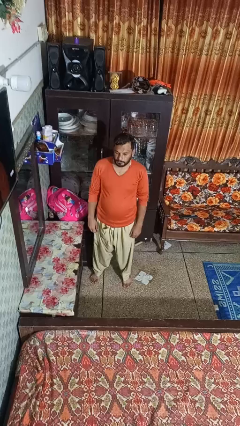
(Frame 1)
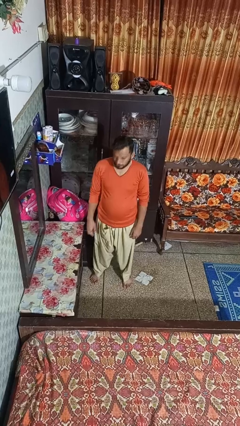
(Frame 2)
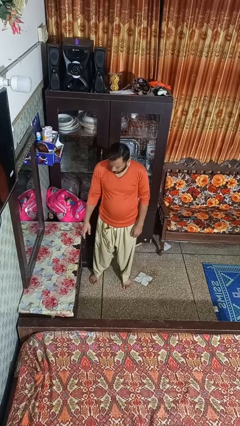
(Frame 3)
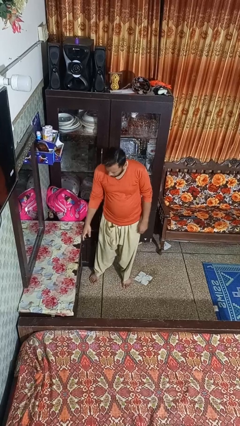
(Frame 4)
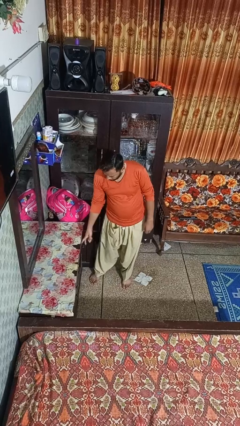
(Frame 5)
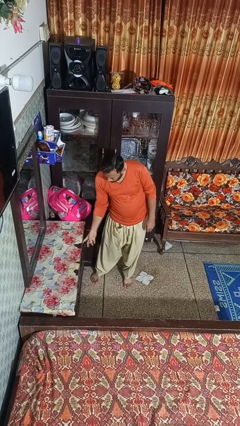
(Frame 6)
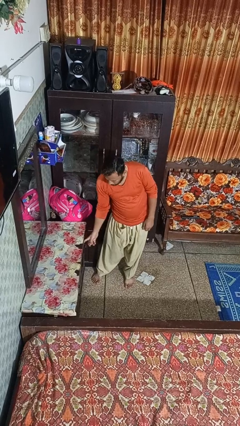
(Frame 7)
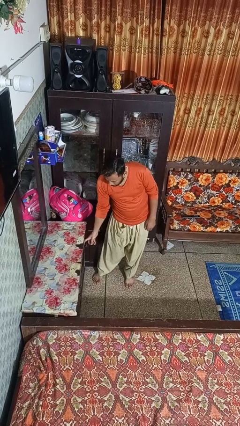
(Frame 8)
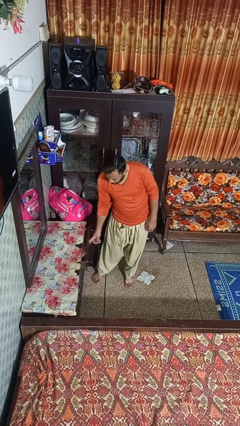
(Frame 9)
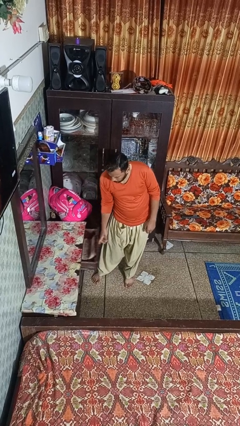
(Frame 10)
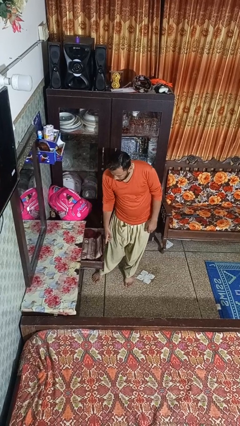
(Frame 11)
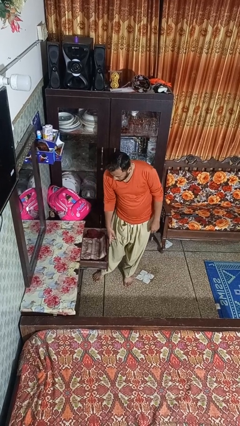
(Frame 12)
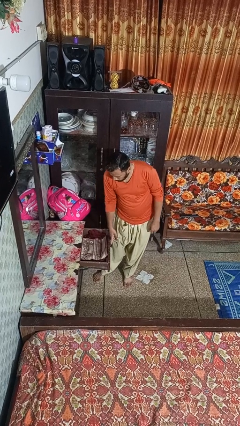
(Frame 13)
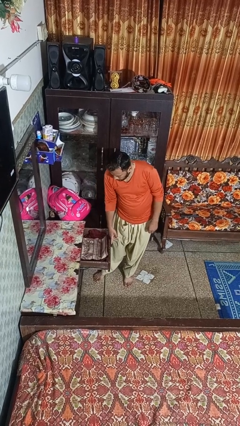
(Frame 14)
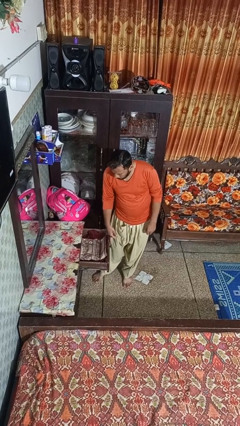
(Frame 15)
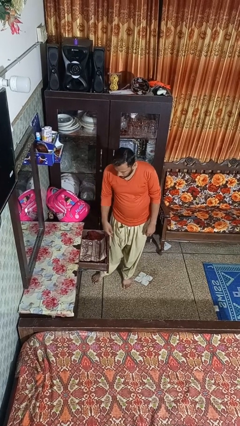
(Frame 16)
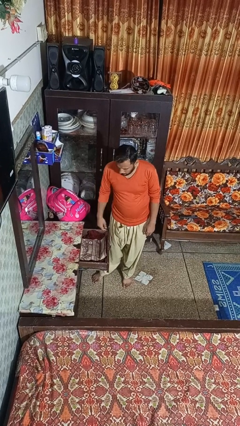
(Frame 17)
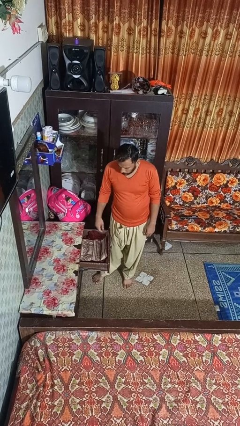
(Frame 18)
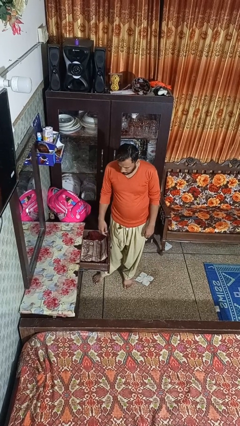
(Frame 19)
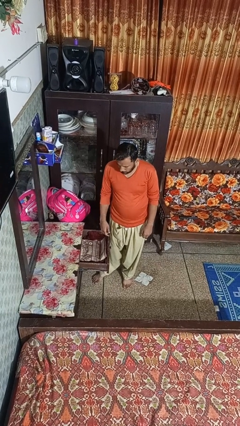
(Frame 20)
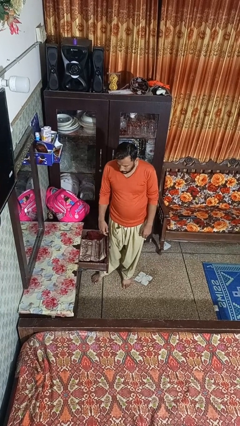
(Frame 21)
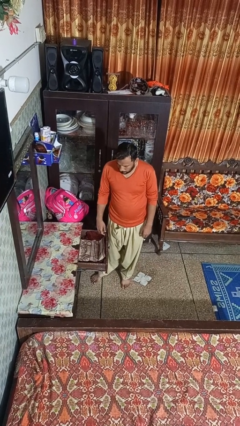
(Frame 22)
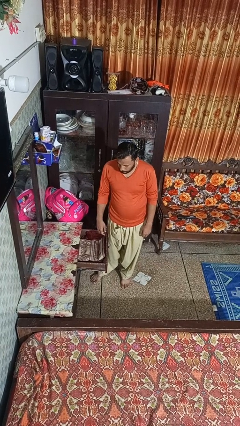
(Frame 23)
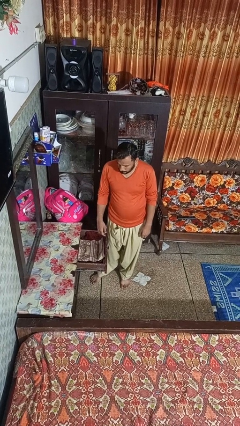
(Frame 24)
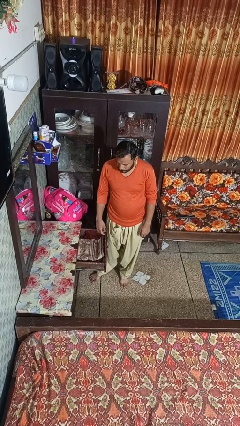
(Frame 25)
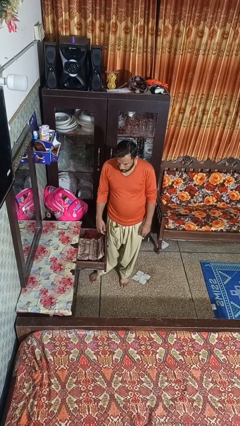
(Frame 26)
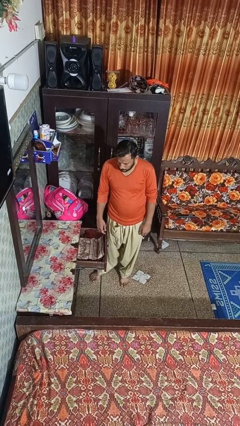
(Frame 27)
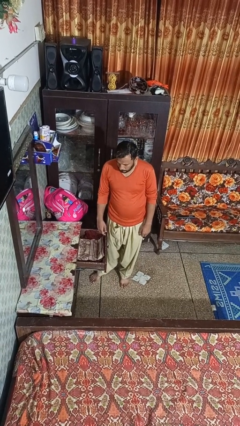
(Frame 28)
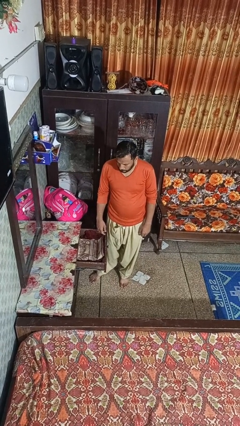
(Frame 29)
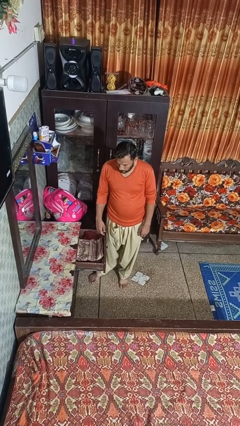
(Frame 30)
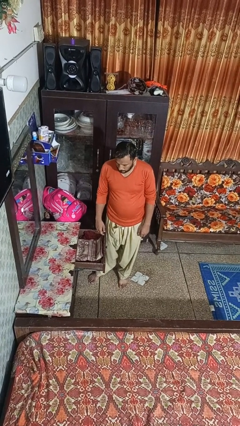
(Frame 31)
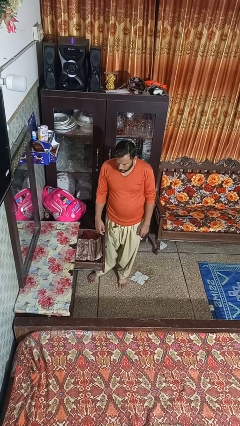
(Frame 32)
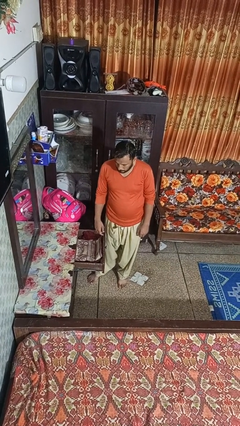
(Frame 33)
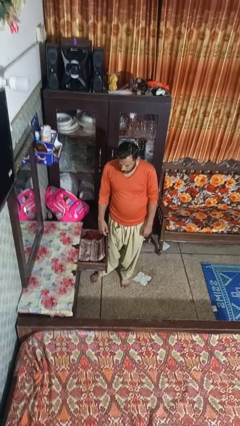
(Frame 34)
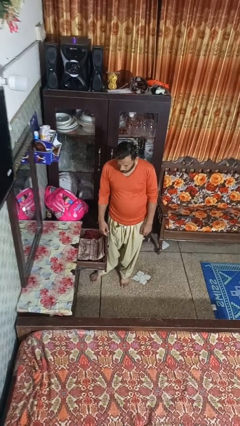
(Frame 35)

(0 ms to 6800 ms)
person opens dresser drawer

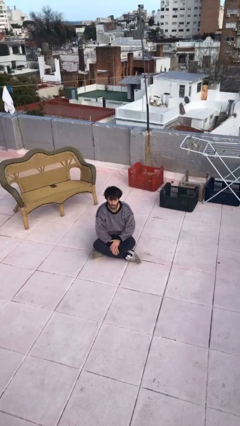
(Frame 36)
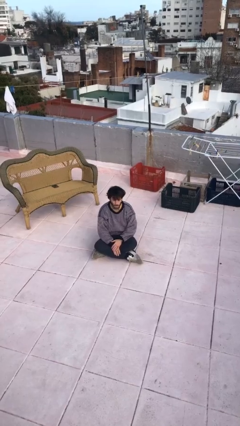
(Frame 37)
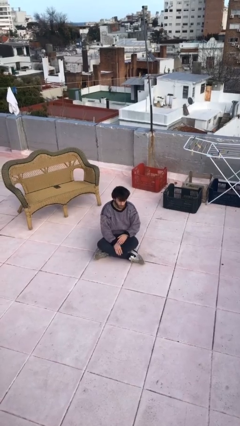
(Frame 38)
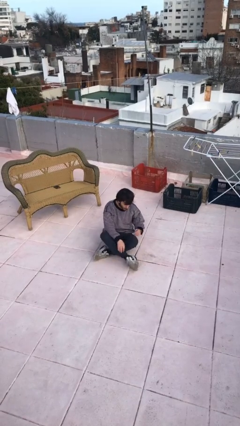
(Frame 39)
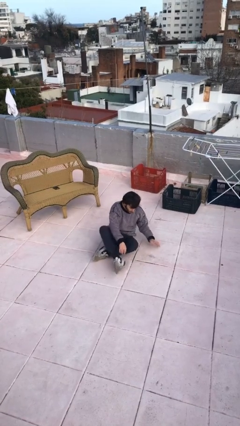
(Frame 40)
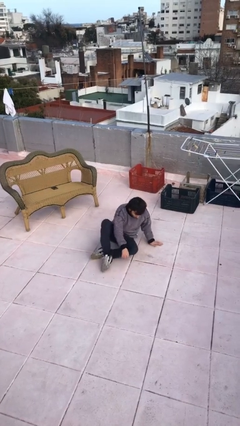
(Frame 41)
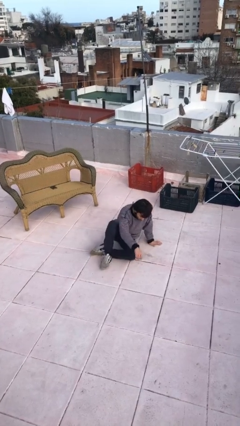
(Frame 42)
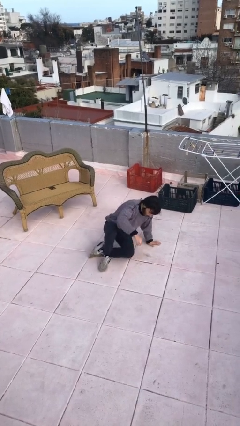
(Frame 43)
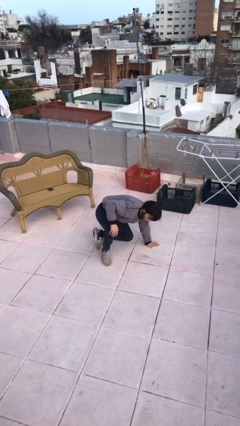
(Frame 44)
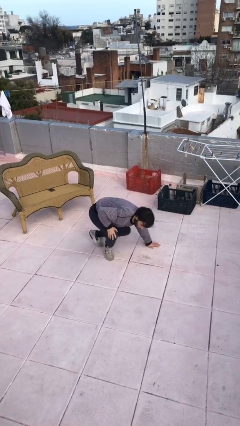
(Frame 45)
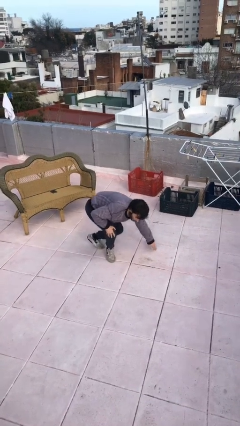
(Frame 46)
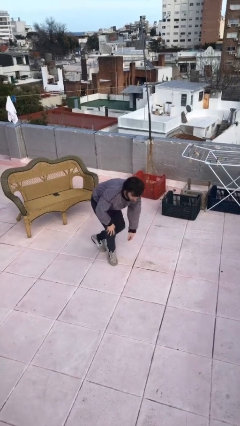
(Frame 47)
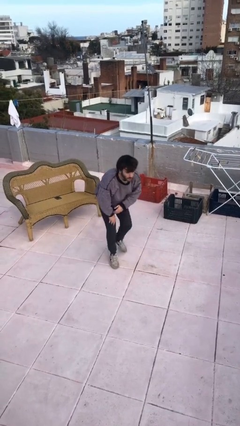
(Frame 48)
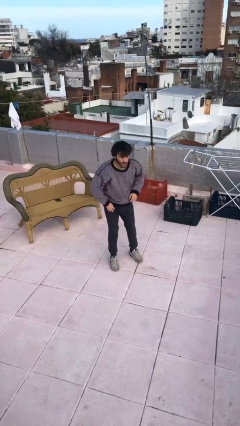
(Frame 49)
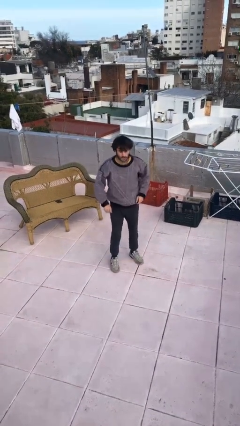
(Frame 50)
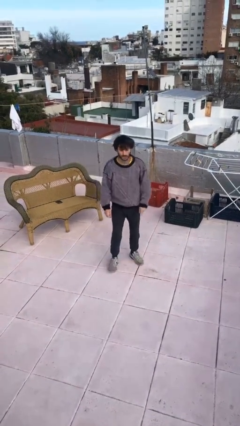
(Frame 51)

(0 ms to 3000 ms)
person stands up from floor

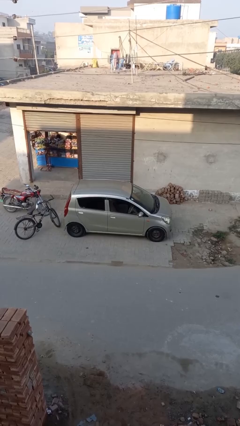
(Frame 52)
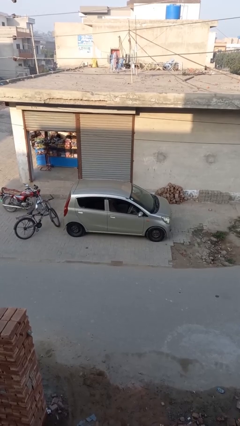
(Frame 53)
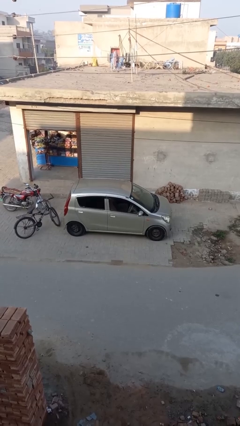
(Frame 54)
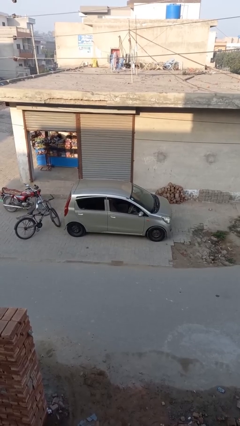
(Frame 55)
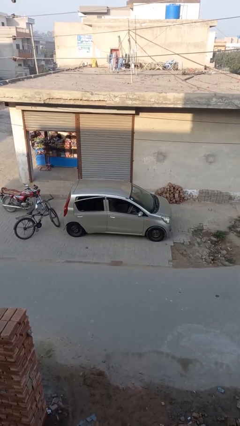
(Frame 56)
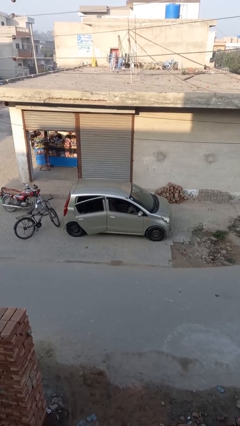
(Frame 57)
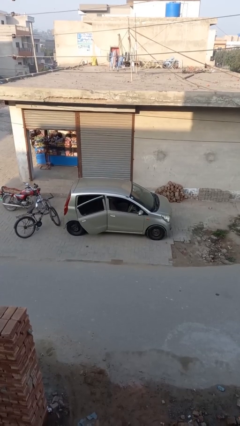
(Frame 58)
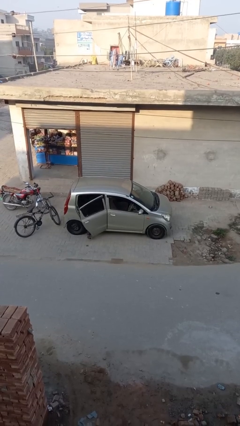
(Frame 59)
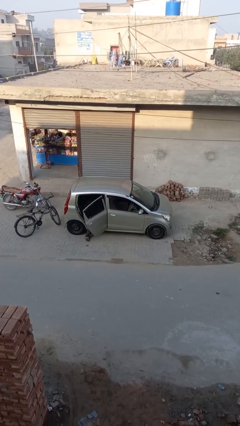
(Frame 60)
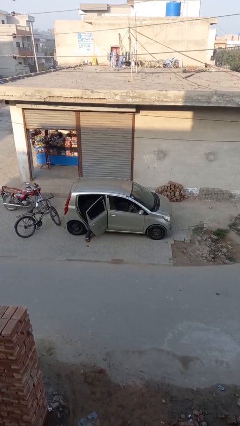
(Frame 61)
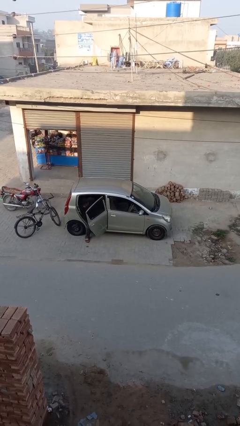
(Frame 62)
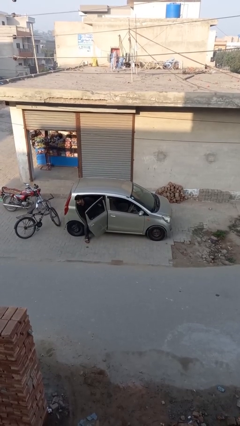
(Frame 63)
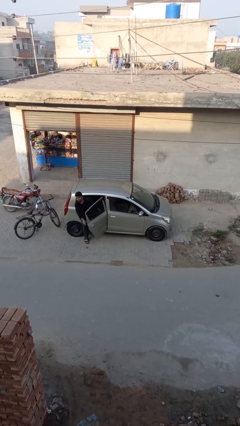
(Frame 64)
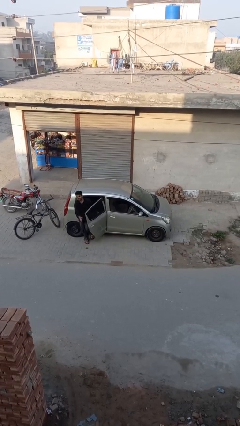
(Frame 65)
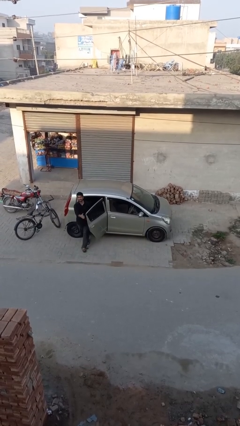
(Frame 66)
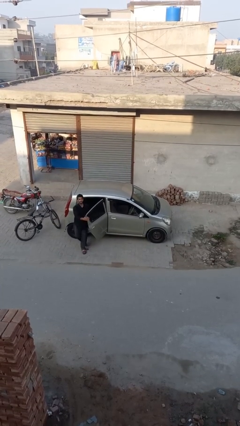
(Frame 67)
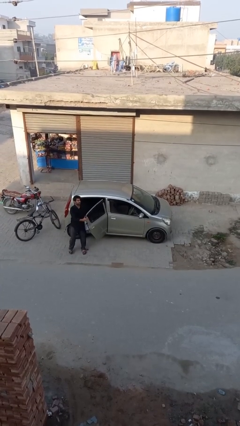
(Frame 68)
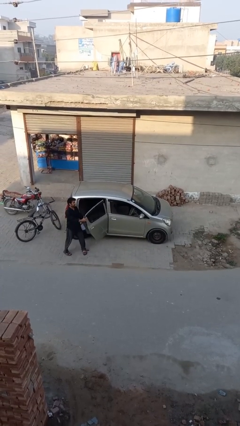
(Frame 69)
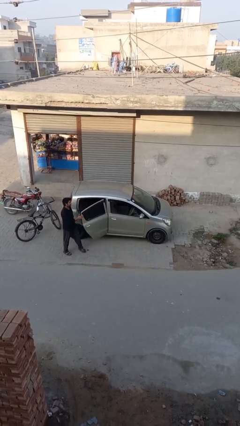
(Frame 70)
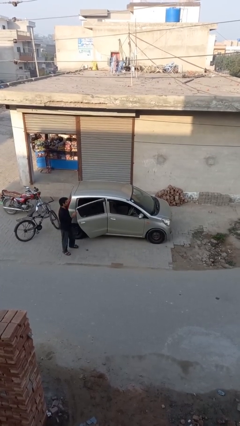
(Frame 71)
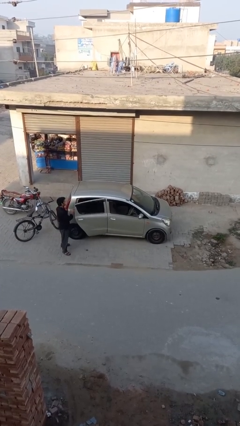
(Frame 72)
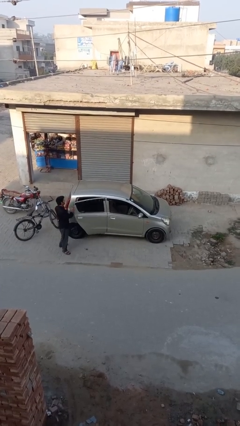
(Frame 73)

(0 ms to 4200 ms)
car drops off person

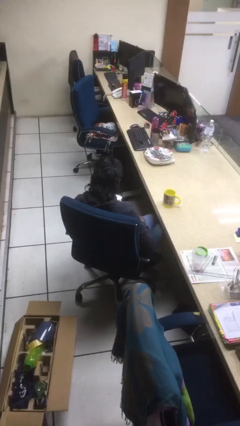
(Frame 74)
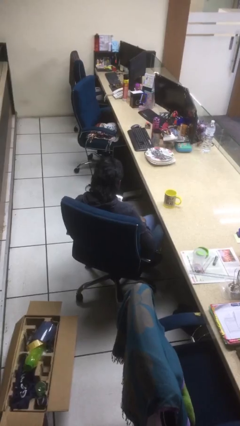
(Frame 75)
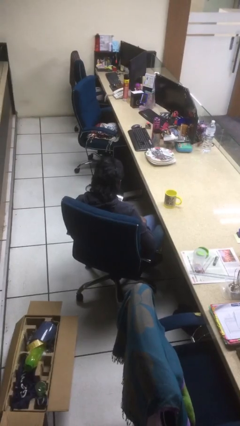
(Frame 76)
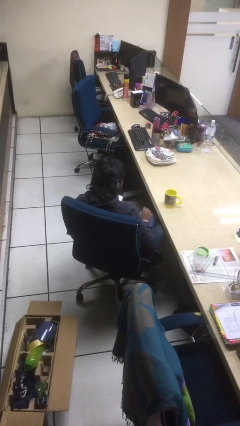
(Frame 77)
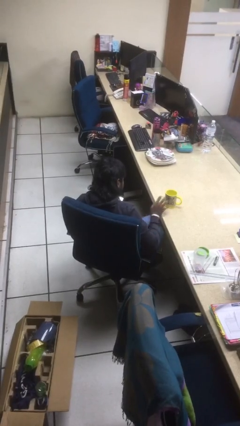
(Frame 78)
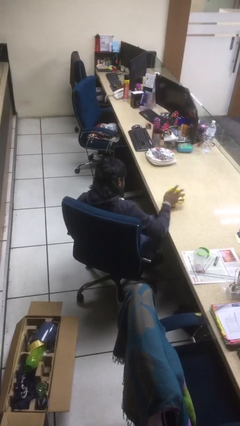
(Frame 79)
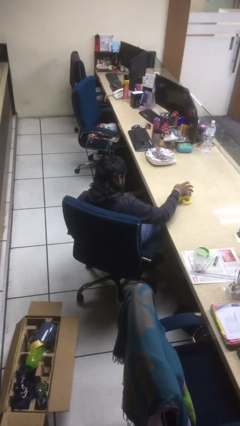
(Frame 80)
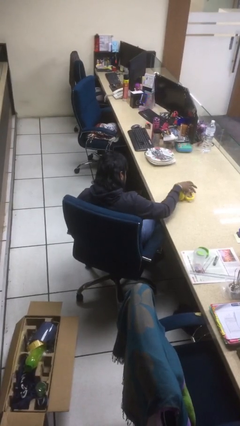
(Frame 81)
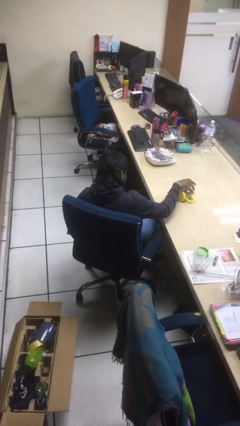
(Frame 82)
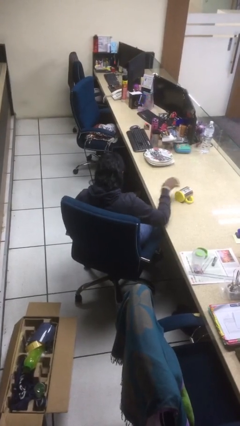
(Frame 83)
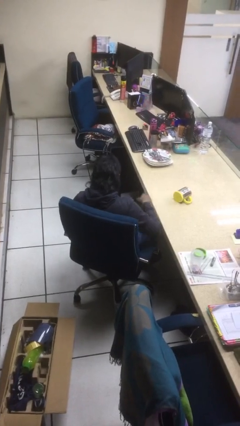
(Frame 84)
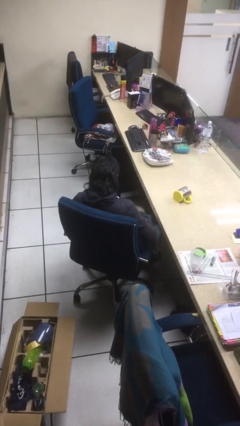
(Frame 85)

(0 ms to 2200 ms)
person knocks over glass

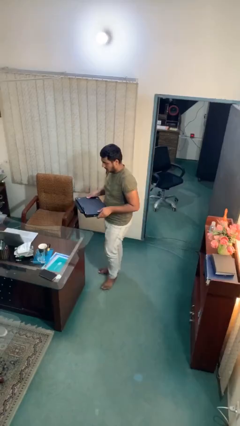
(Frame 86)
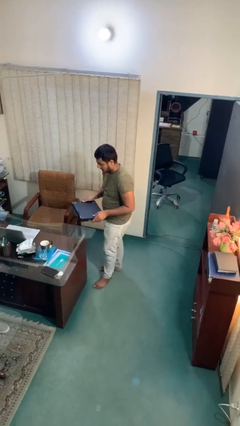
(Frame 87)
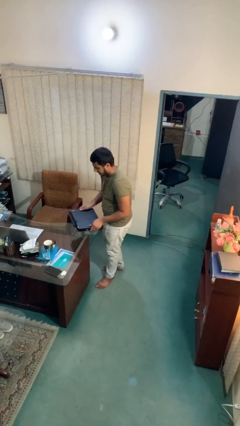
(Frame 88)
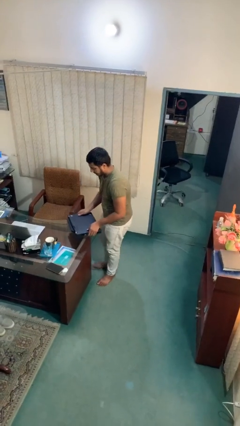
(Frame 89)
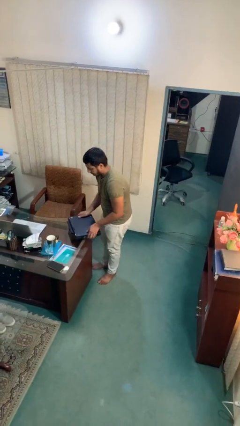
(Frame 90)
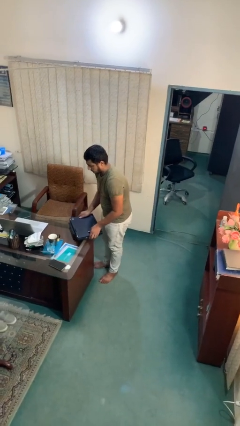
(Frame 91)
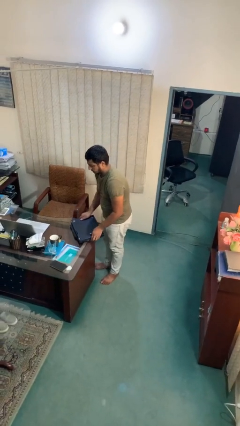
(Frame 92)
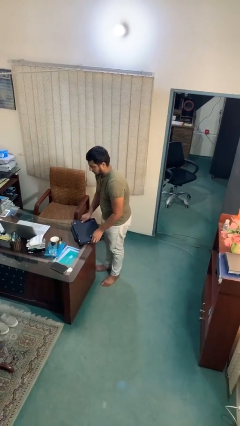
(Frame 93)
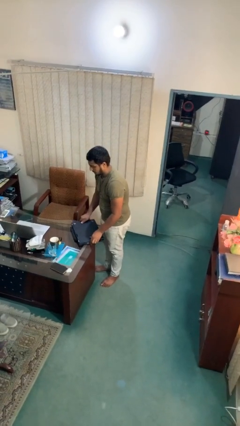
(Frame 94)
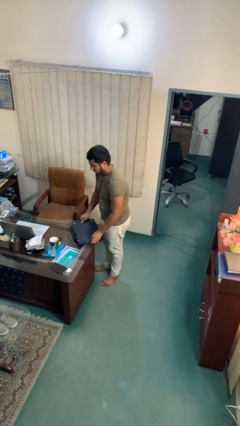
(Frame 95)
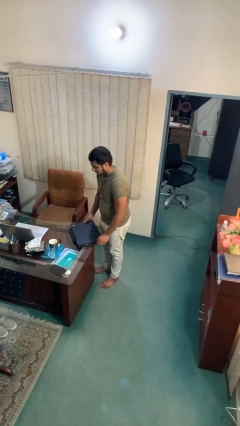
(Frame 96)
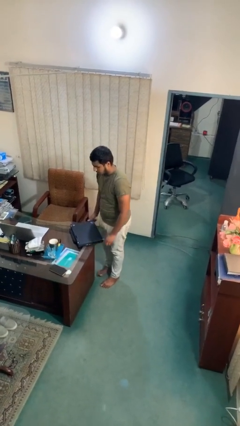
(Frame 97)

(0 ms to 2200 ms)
person puts down object on table
